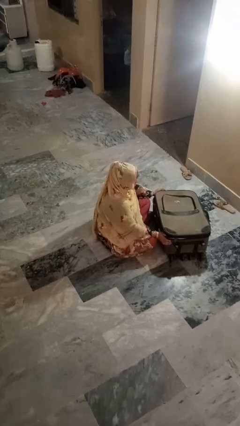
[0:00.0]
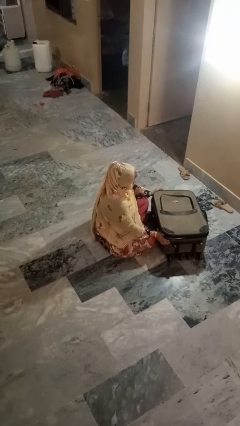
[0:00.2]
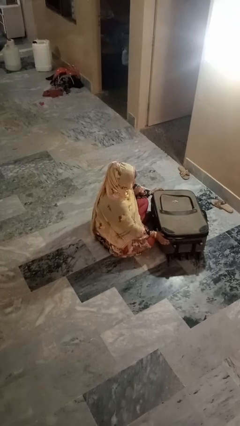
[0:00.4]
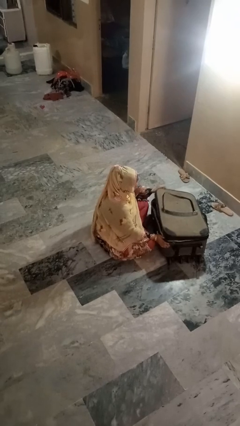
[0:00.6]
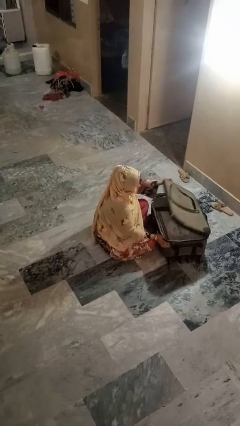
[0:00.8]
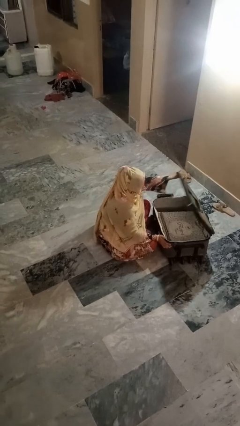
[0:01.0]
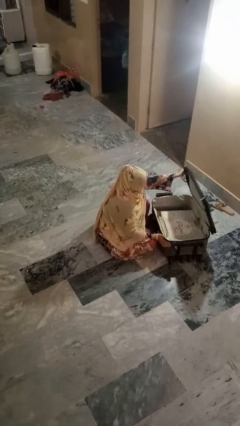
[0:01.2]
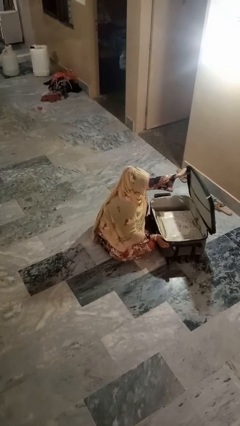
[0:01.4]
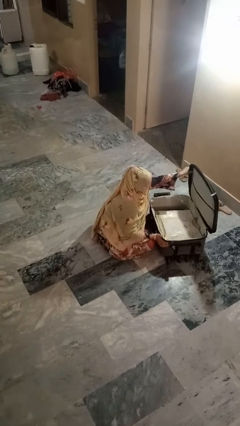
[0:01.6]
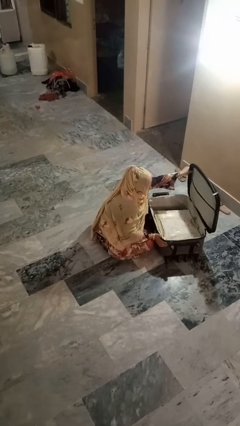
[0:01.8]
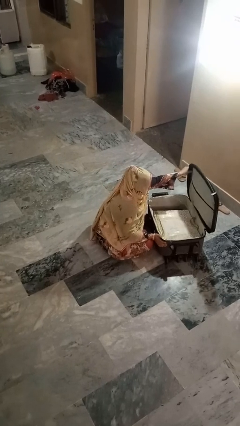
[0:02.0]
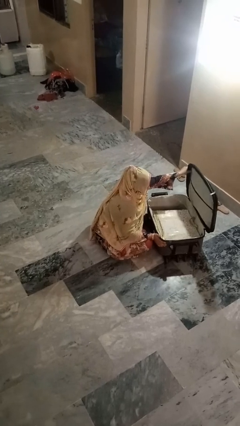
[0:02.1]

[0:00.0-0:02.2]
person opens suitcase

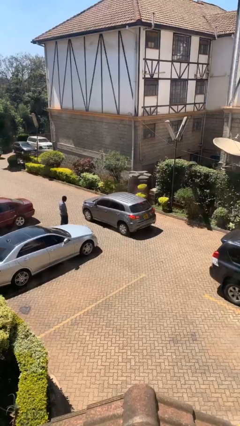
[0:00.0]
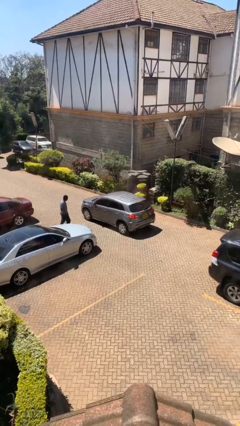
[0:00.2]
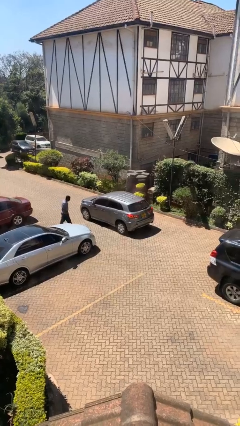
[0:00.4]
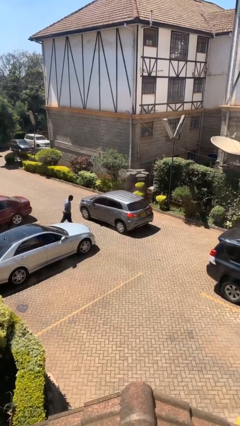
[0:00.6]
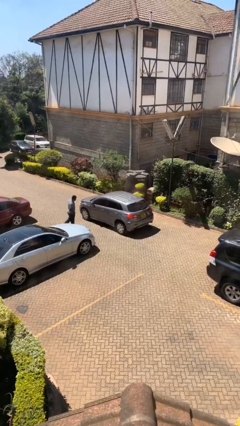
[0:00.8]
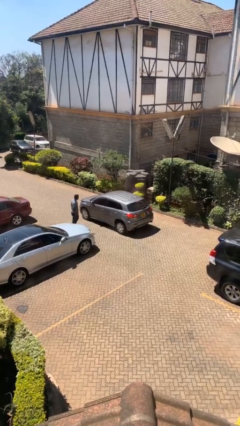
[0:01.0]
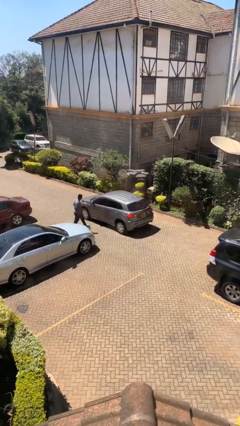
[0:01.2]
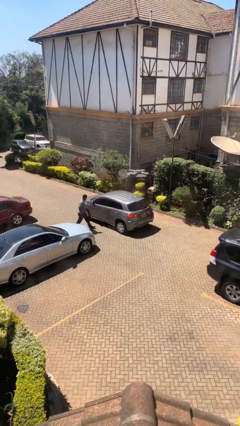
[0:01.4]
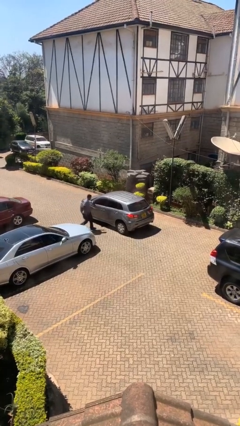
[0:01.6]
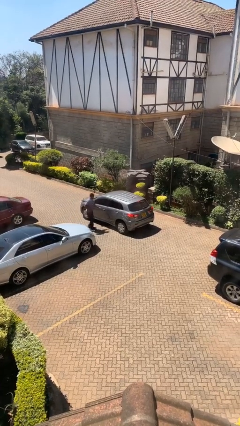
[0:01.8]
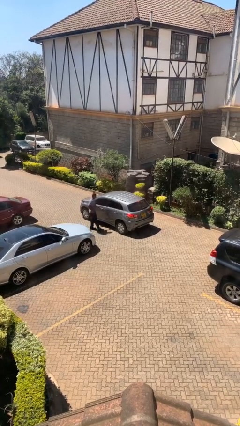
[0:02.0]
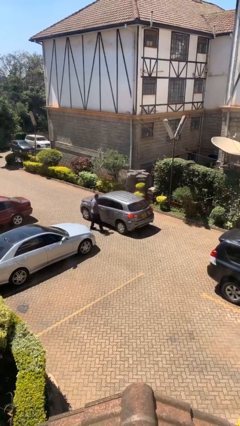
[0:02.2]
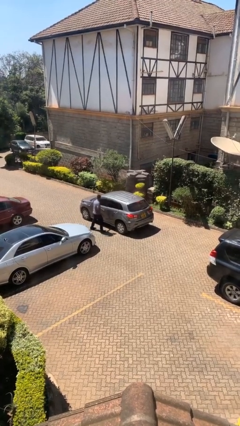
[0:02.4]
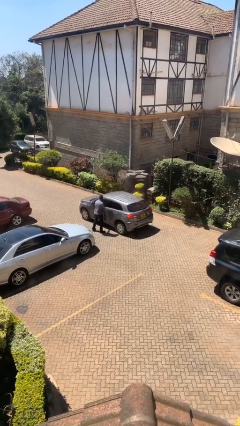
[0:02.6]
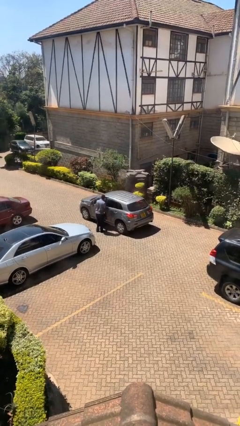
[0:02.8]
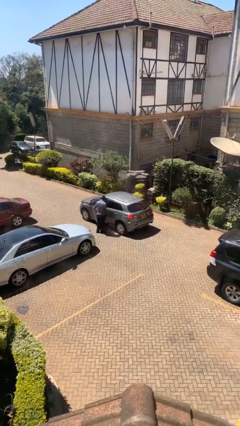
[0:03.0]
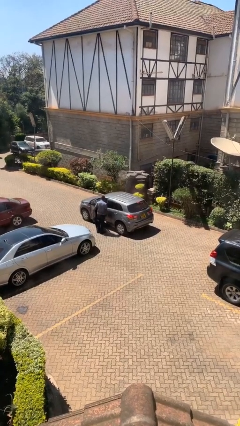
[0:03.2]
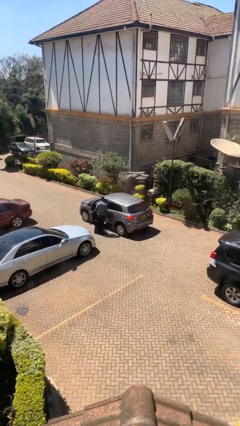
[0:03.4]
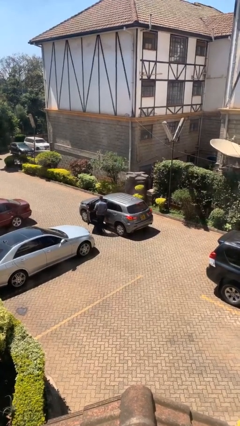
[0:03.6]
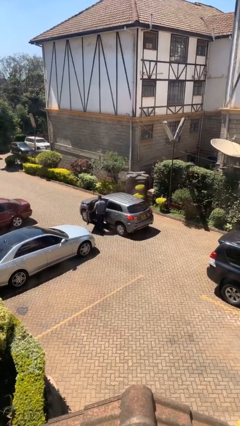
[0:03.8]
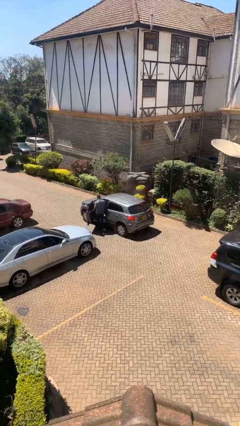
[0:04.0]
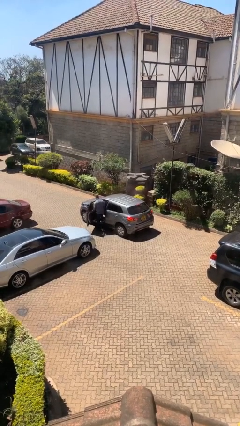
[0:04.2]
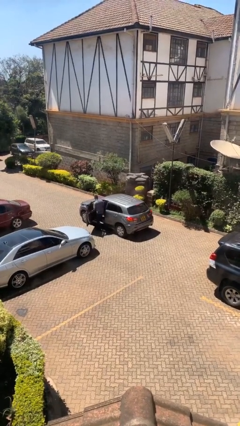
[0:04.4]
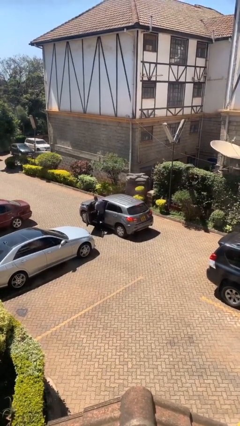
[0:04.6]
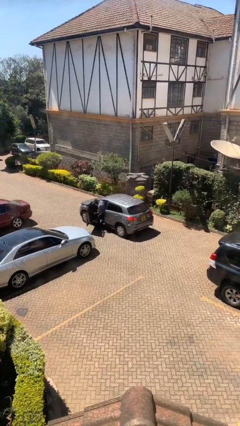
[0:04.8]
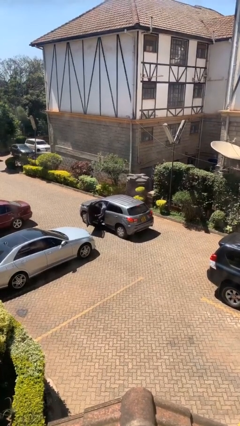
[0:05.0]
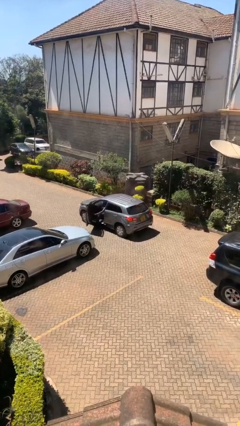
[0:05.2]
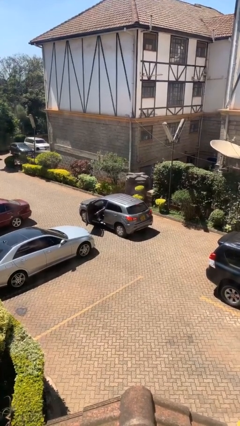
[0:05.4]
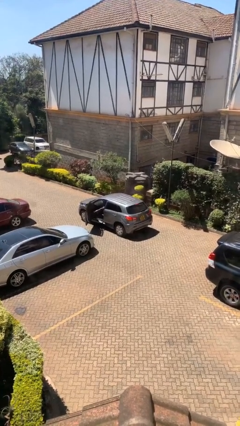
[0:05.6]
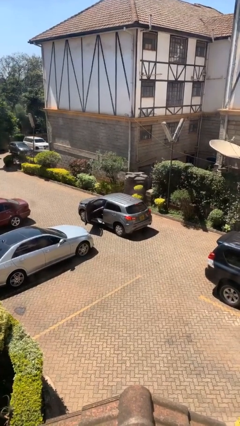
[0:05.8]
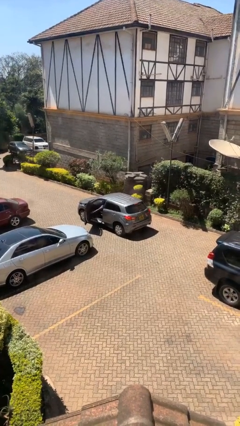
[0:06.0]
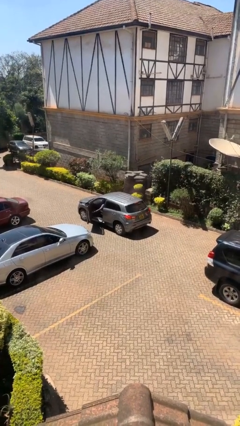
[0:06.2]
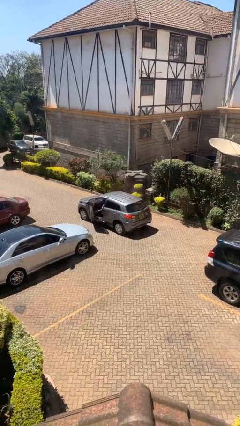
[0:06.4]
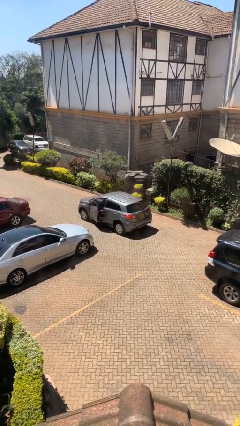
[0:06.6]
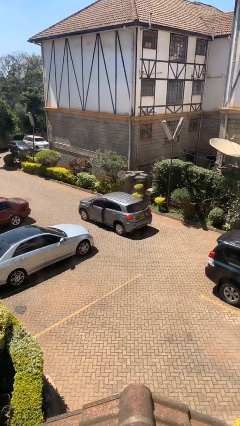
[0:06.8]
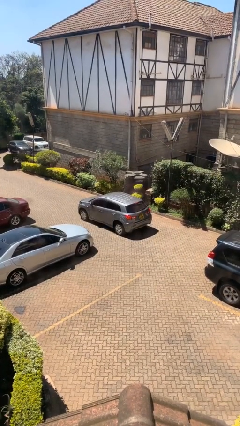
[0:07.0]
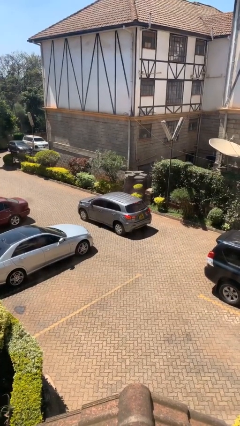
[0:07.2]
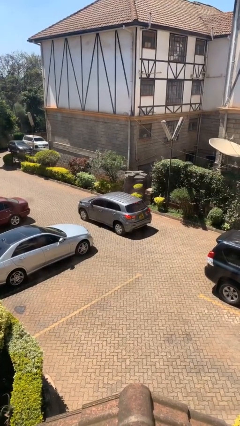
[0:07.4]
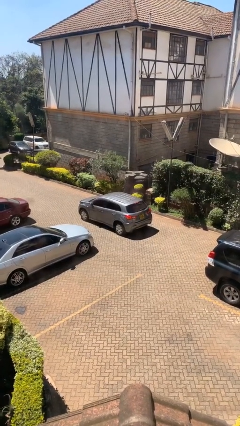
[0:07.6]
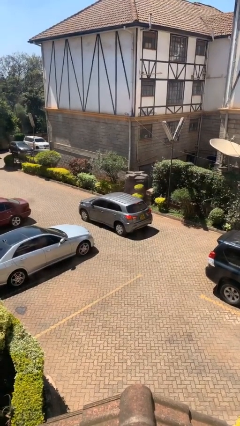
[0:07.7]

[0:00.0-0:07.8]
car picks up person

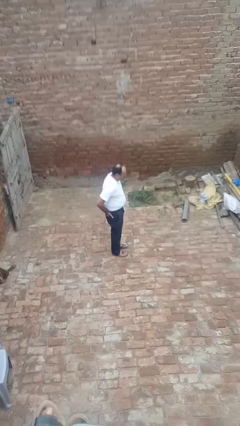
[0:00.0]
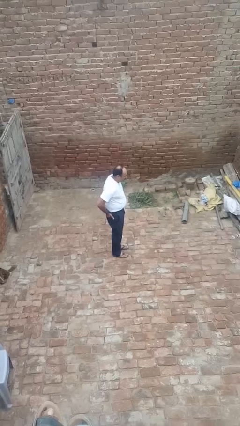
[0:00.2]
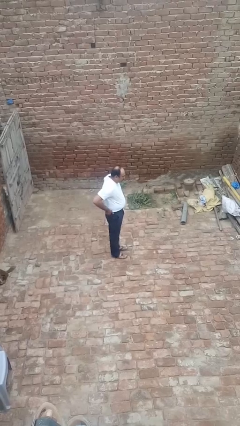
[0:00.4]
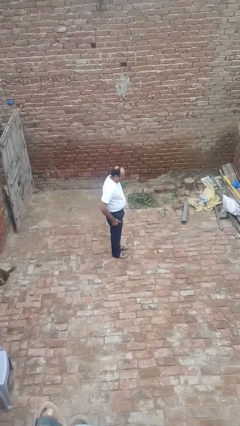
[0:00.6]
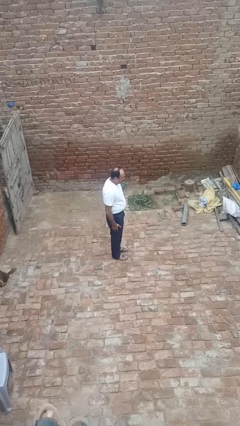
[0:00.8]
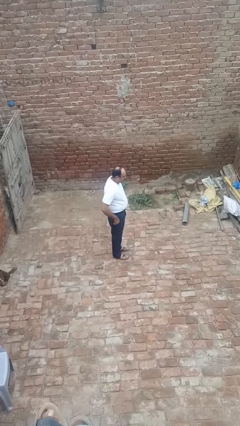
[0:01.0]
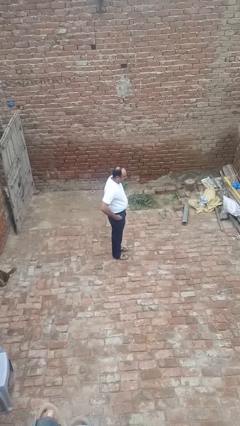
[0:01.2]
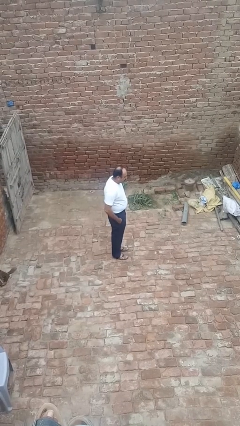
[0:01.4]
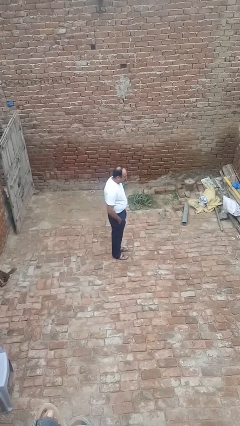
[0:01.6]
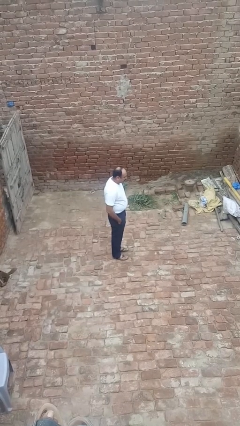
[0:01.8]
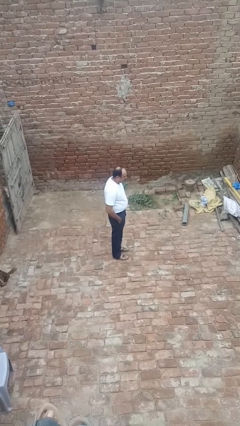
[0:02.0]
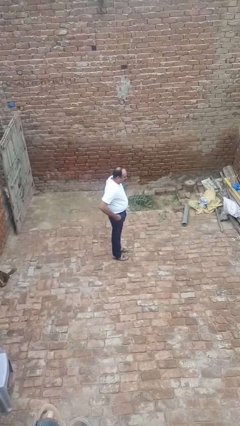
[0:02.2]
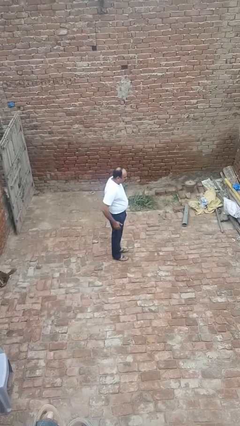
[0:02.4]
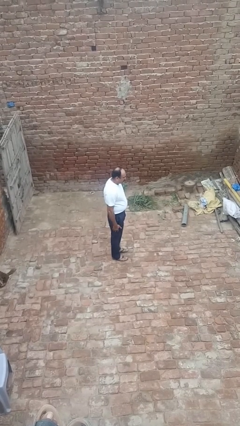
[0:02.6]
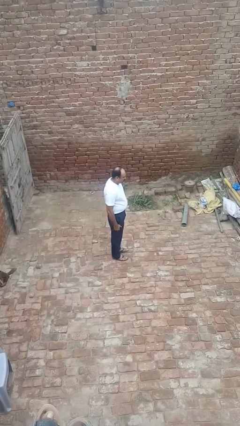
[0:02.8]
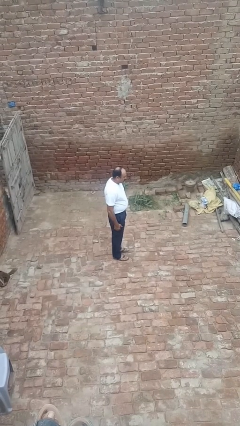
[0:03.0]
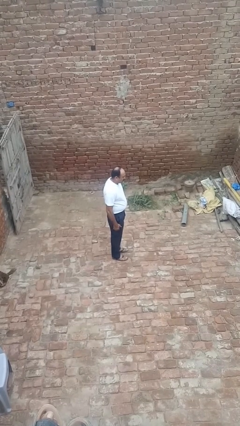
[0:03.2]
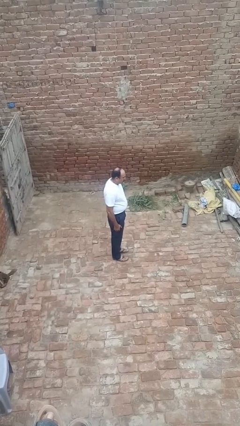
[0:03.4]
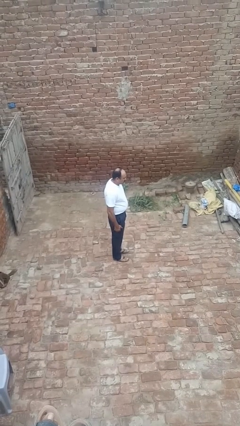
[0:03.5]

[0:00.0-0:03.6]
person puts hands in back pockets

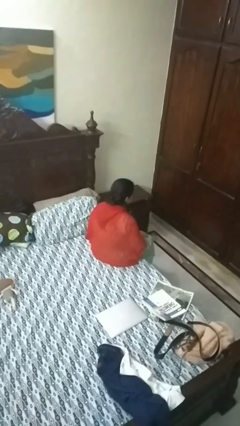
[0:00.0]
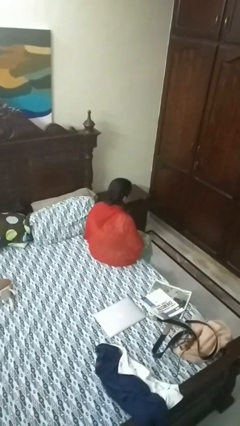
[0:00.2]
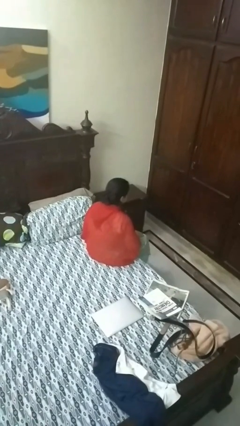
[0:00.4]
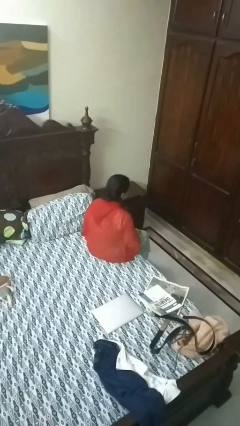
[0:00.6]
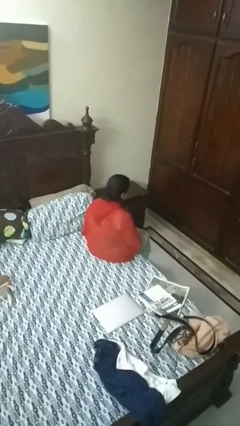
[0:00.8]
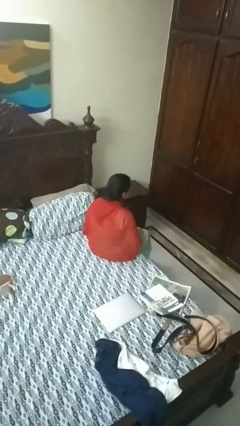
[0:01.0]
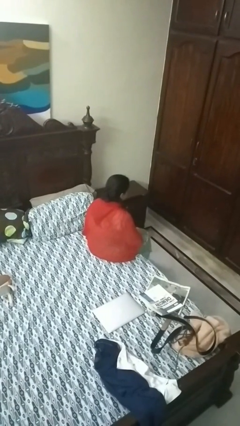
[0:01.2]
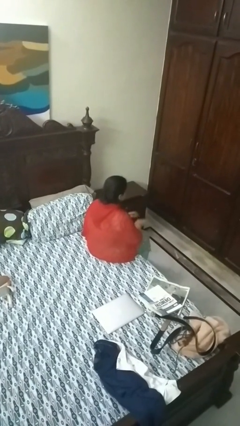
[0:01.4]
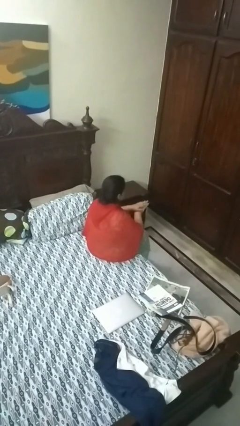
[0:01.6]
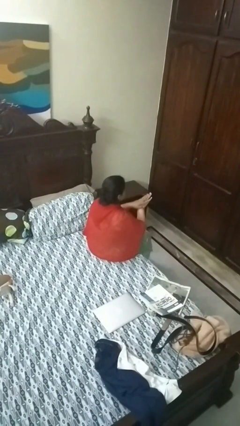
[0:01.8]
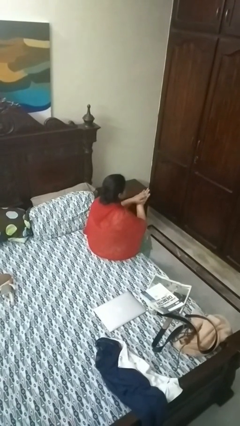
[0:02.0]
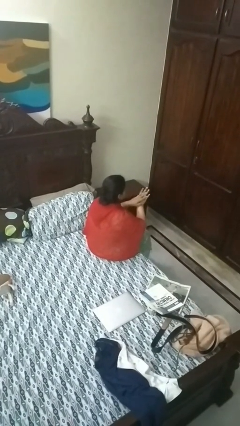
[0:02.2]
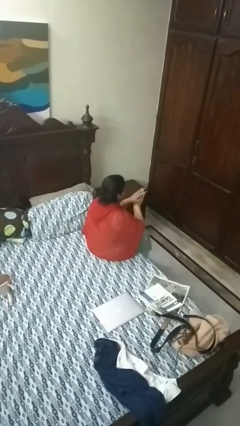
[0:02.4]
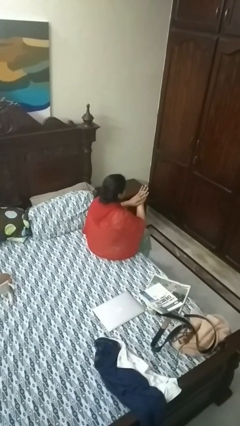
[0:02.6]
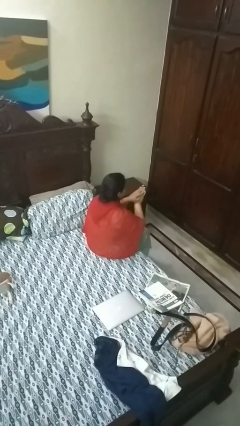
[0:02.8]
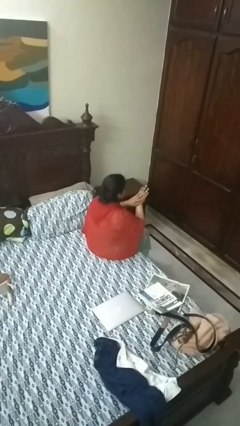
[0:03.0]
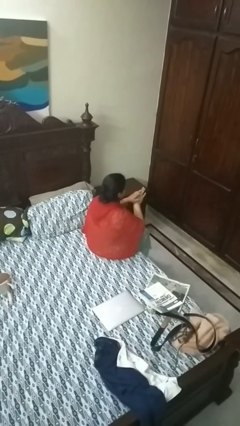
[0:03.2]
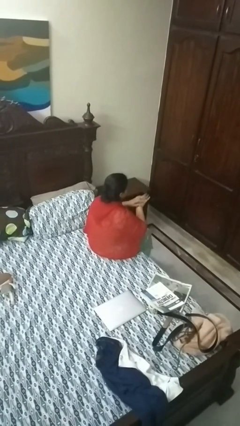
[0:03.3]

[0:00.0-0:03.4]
person looks at hands in lap

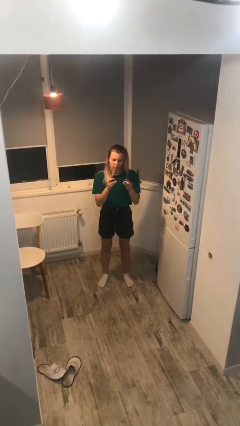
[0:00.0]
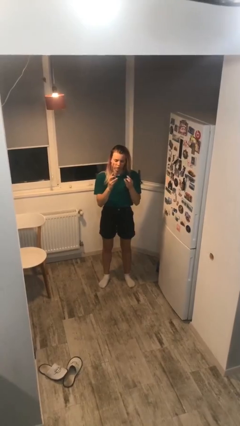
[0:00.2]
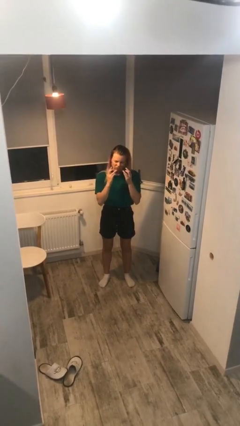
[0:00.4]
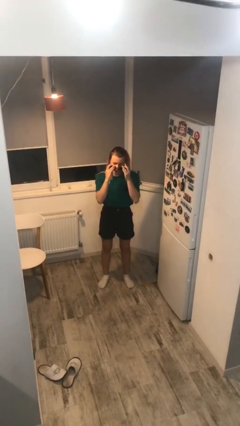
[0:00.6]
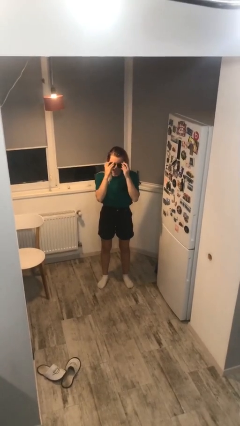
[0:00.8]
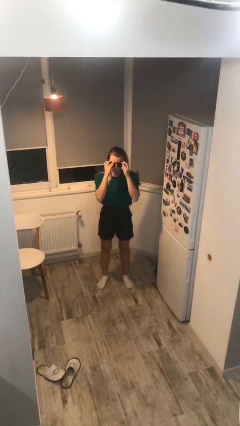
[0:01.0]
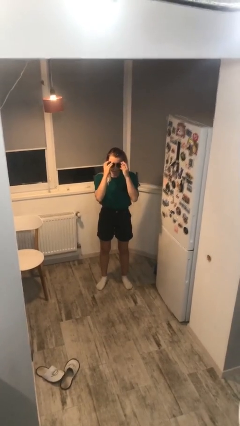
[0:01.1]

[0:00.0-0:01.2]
person puts on glasses
